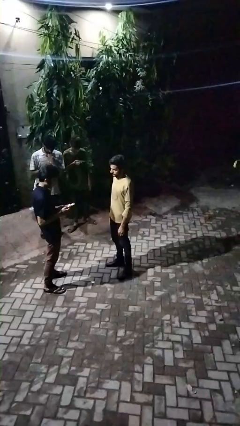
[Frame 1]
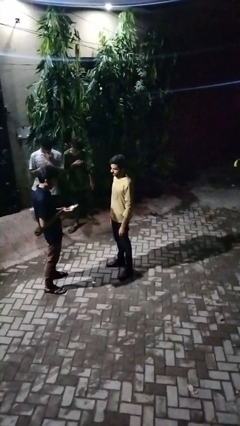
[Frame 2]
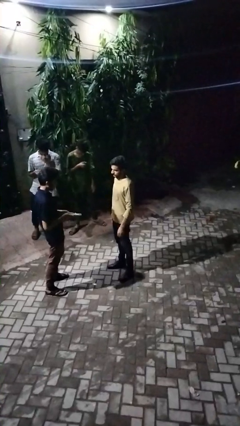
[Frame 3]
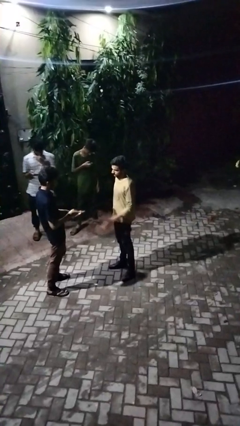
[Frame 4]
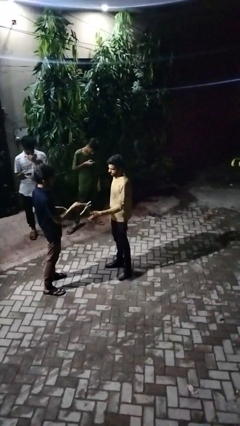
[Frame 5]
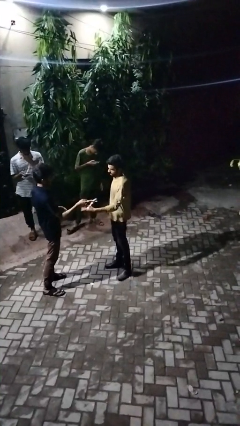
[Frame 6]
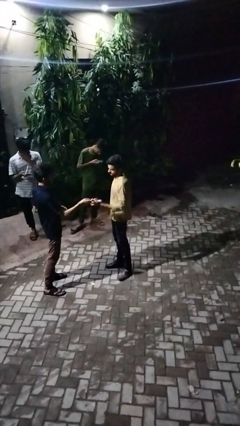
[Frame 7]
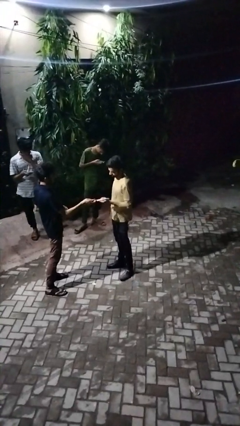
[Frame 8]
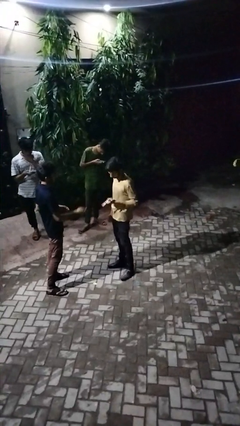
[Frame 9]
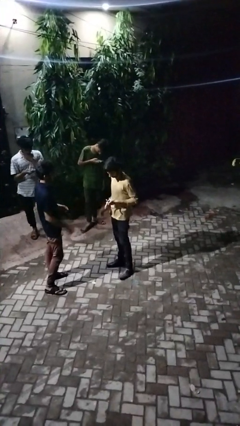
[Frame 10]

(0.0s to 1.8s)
person transfers object to person

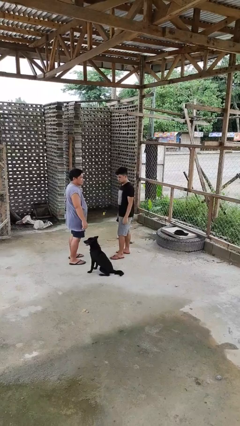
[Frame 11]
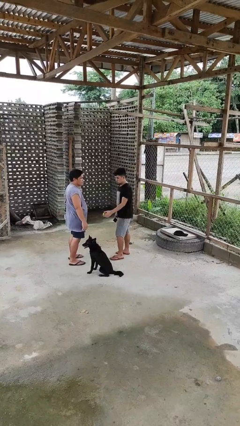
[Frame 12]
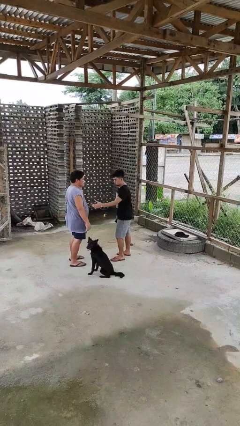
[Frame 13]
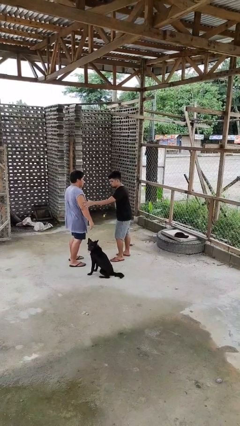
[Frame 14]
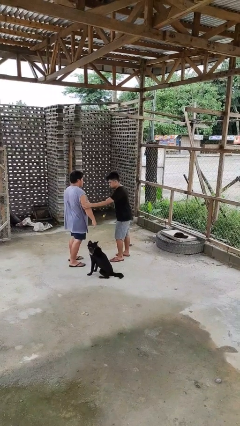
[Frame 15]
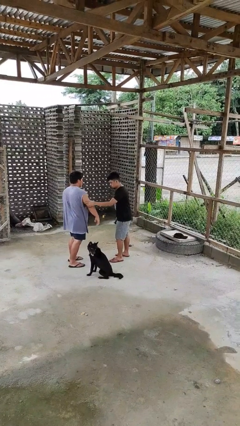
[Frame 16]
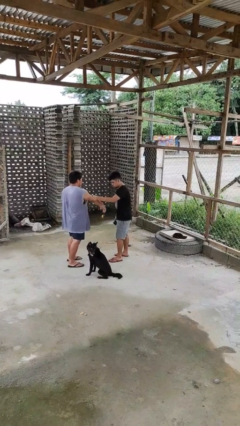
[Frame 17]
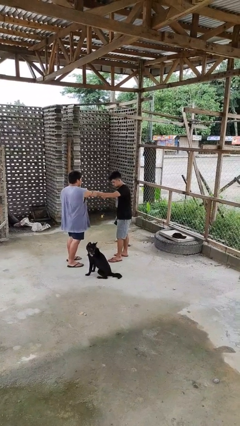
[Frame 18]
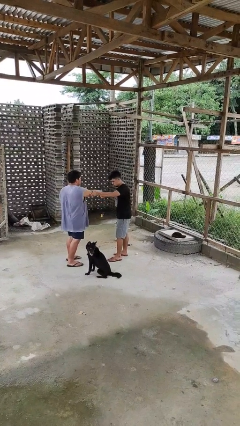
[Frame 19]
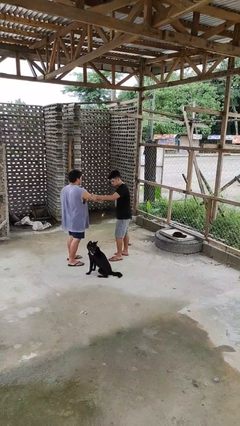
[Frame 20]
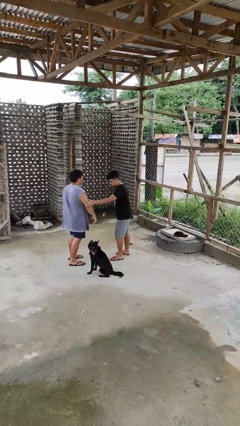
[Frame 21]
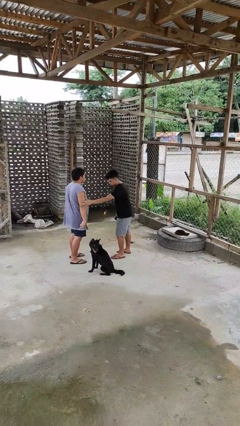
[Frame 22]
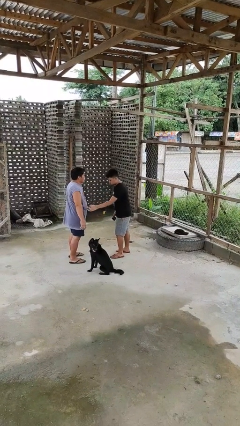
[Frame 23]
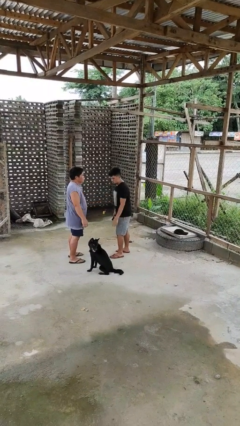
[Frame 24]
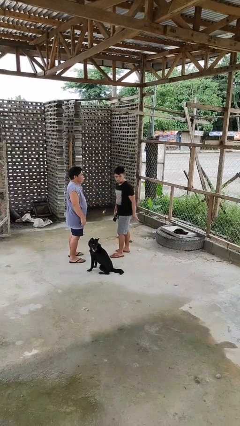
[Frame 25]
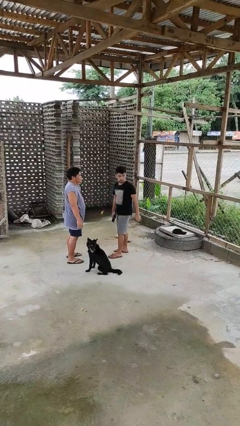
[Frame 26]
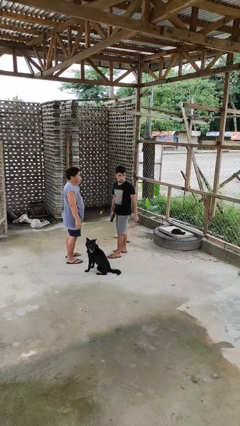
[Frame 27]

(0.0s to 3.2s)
person grabs person by bicep

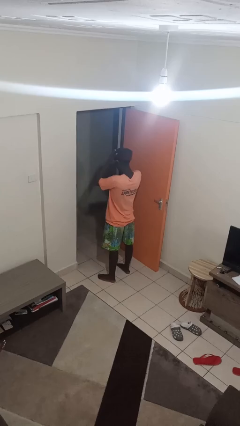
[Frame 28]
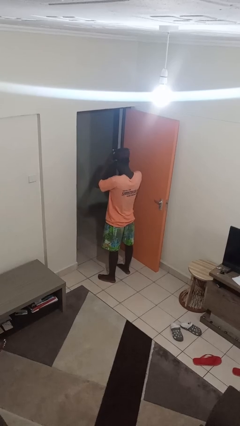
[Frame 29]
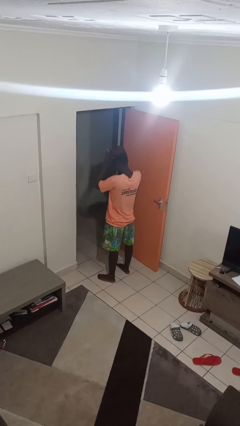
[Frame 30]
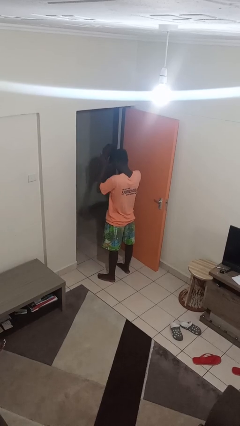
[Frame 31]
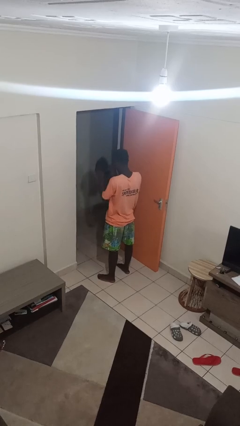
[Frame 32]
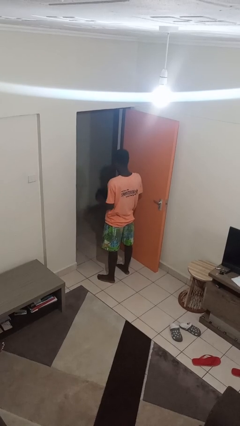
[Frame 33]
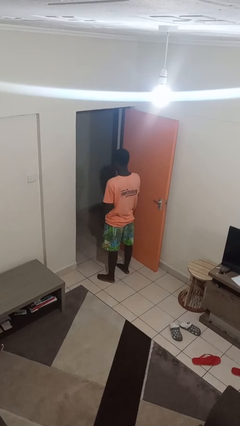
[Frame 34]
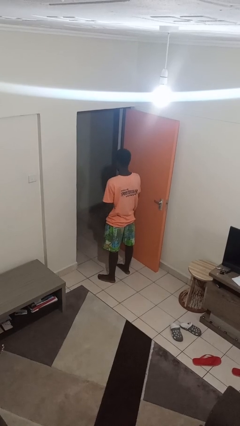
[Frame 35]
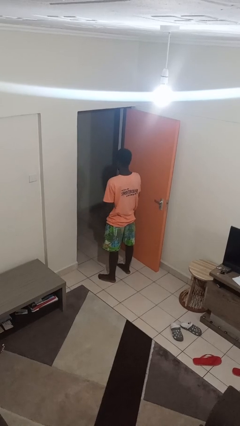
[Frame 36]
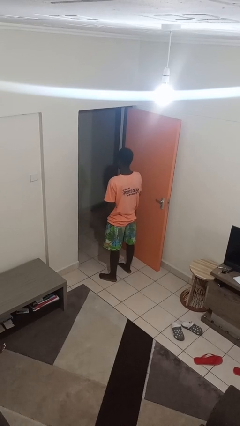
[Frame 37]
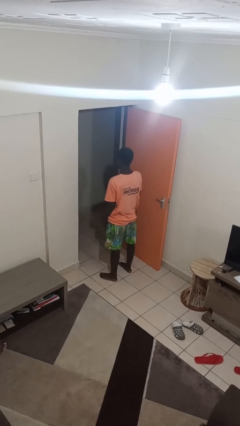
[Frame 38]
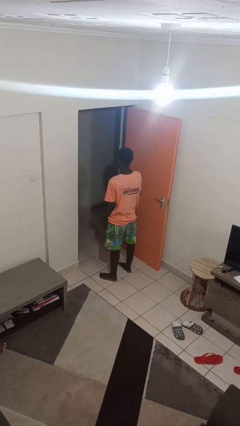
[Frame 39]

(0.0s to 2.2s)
person takes off hat

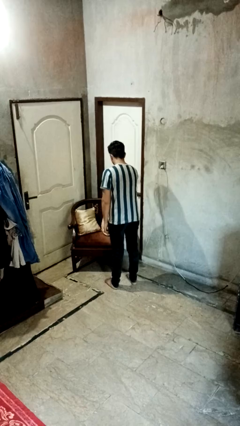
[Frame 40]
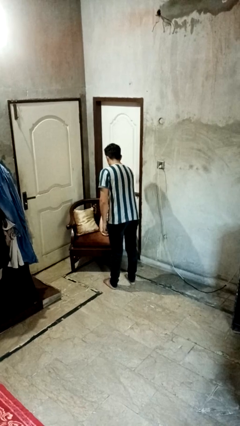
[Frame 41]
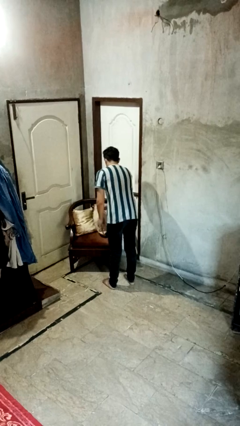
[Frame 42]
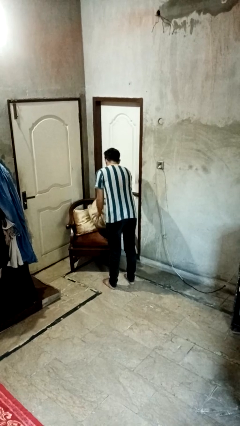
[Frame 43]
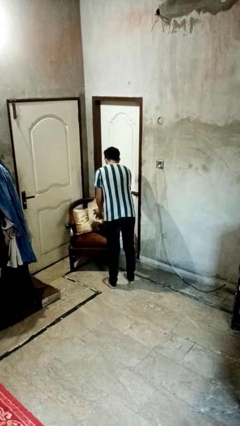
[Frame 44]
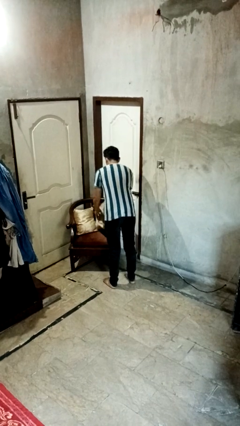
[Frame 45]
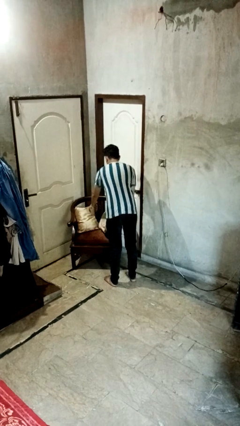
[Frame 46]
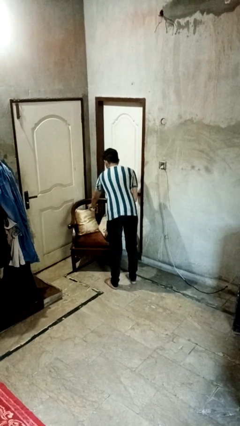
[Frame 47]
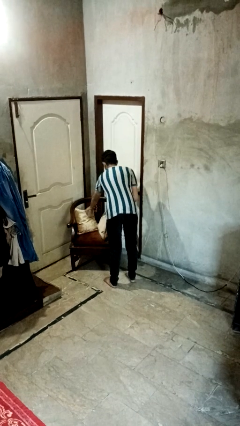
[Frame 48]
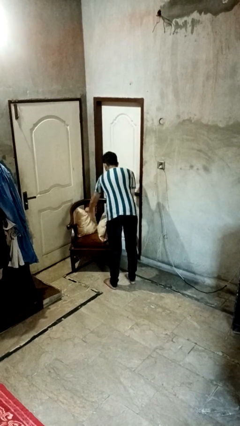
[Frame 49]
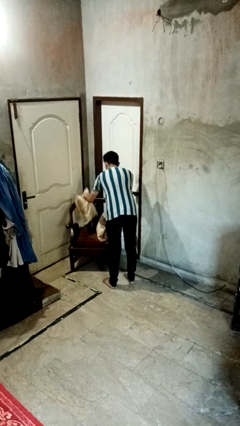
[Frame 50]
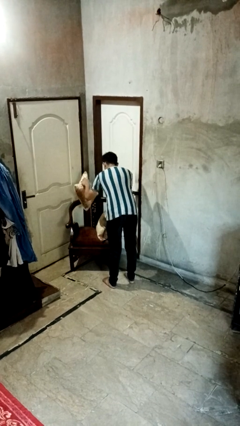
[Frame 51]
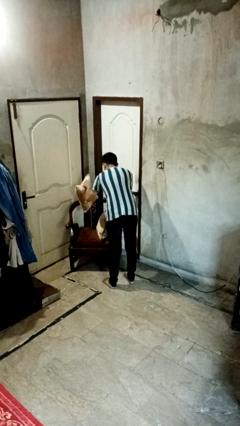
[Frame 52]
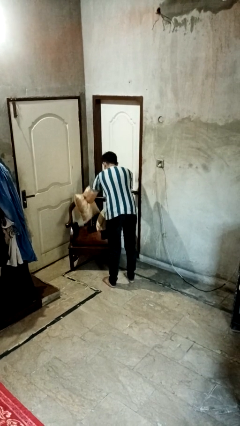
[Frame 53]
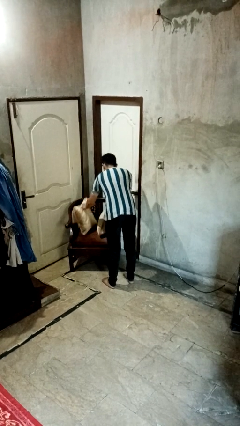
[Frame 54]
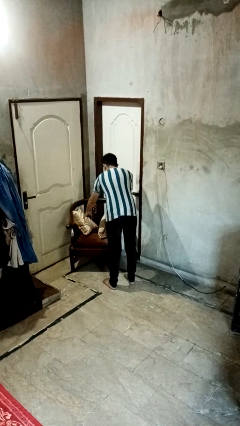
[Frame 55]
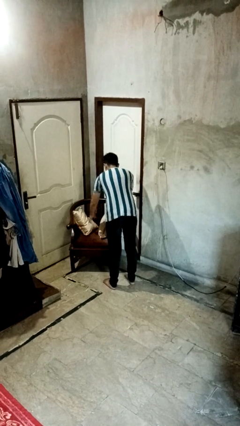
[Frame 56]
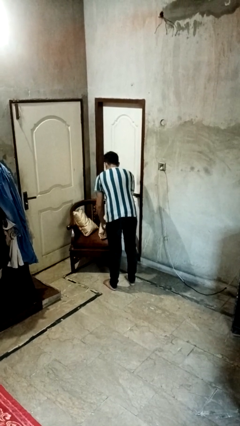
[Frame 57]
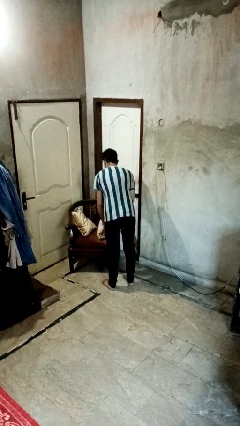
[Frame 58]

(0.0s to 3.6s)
person searches in couch

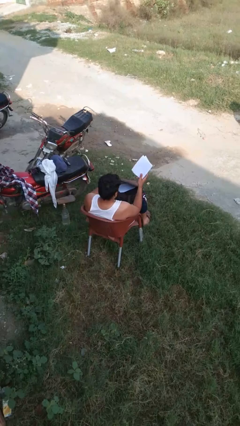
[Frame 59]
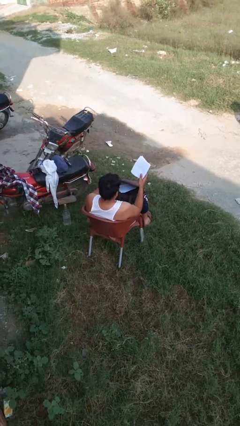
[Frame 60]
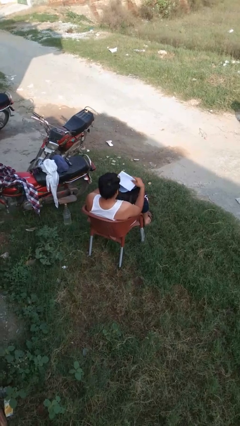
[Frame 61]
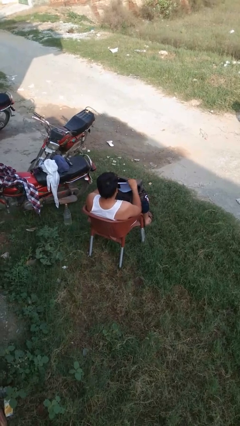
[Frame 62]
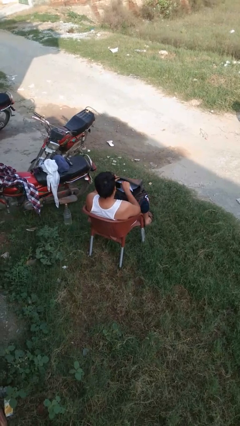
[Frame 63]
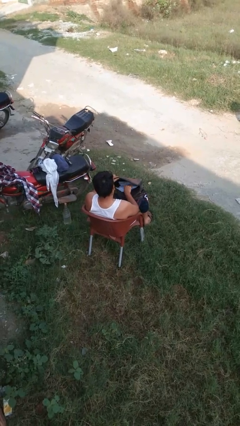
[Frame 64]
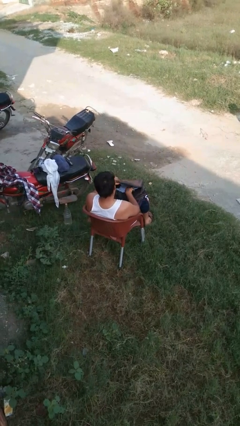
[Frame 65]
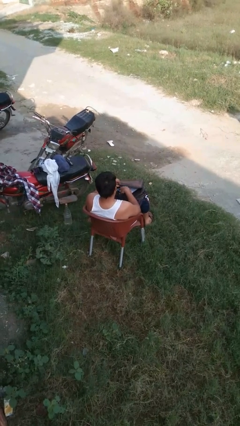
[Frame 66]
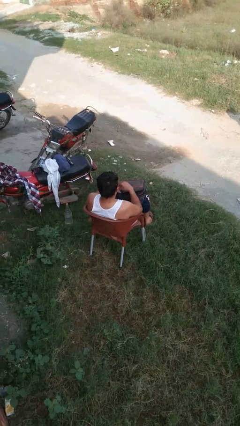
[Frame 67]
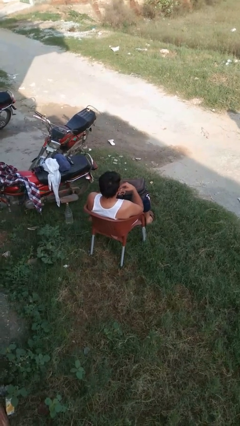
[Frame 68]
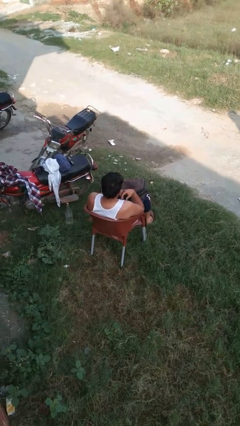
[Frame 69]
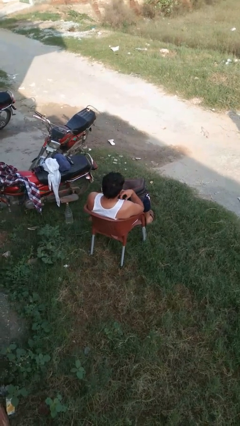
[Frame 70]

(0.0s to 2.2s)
person puts object into backpack

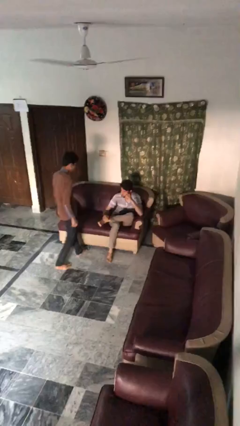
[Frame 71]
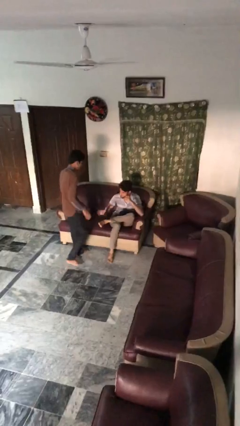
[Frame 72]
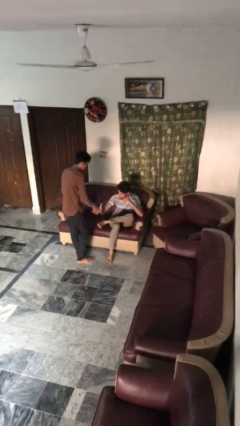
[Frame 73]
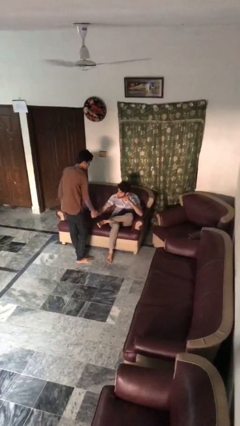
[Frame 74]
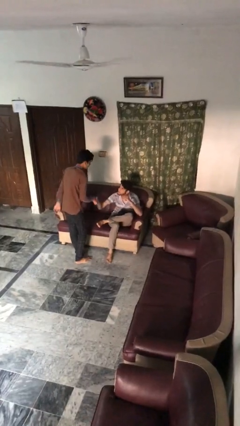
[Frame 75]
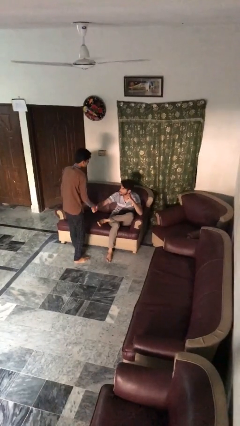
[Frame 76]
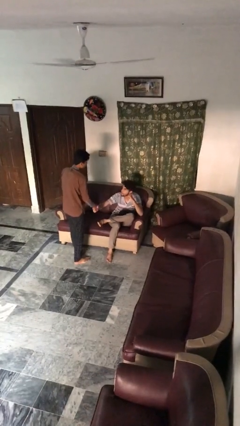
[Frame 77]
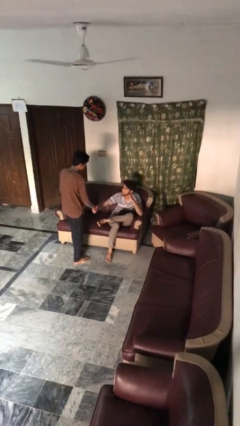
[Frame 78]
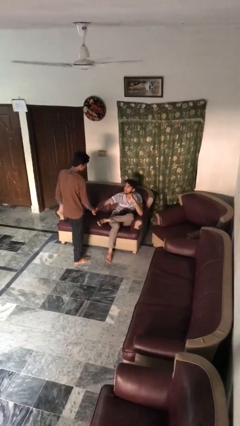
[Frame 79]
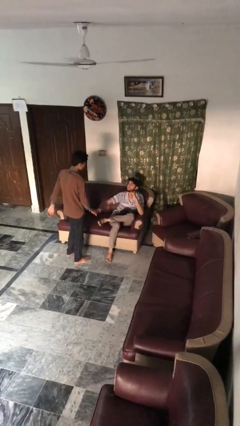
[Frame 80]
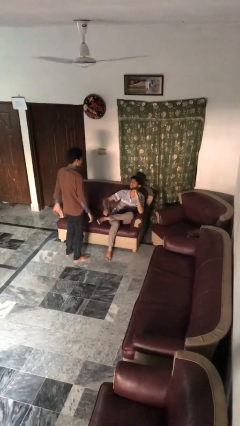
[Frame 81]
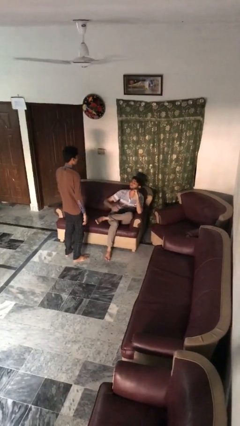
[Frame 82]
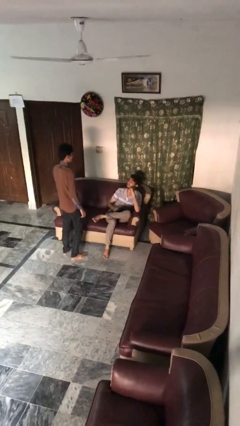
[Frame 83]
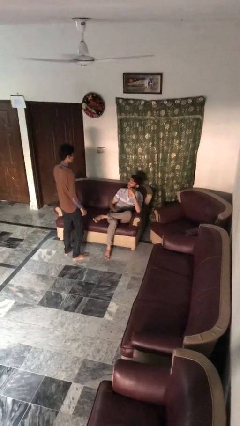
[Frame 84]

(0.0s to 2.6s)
person shakes hand

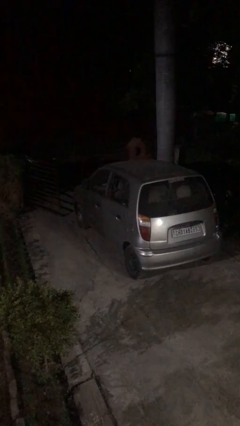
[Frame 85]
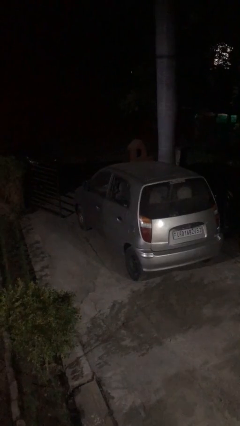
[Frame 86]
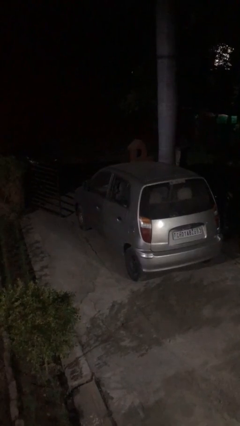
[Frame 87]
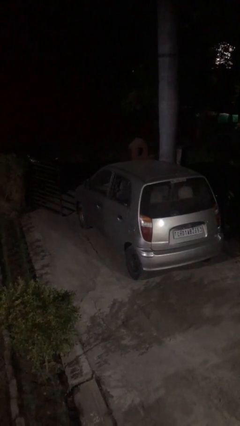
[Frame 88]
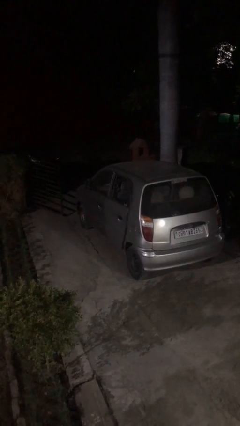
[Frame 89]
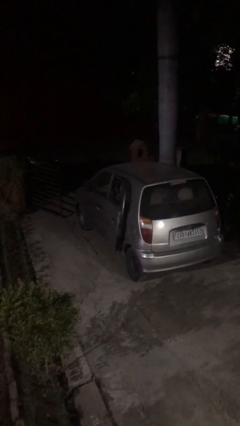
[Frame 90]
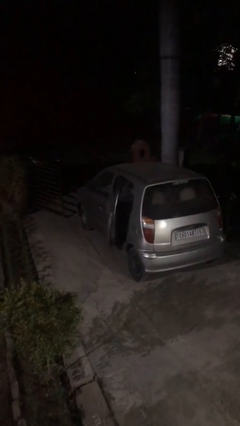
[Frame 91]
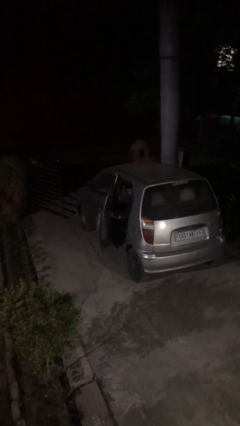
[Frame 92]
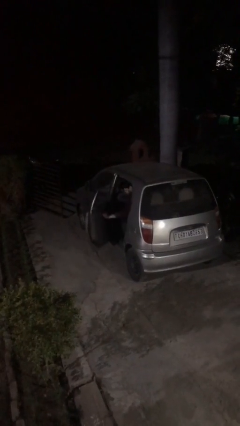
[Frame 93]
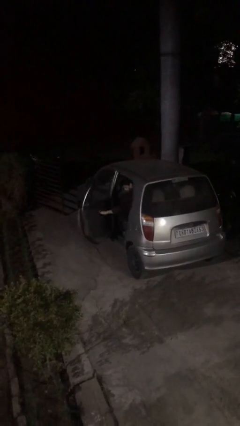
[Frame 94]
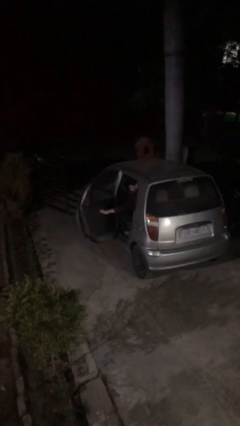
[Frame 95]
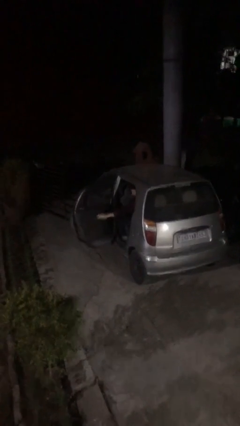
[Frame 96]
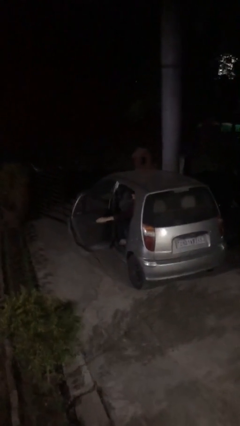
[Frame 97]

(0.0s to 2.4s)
person opens car door
